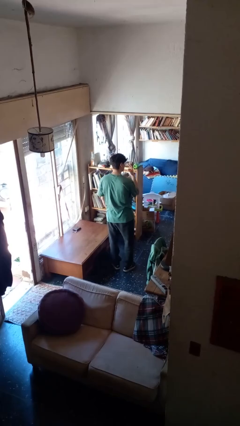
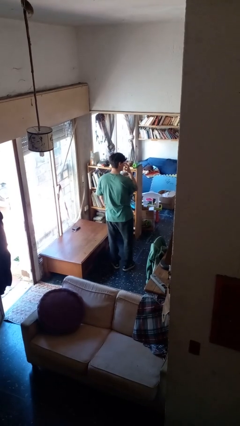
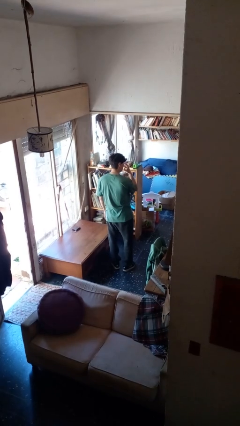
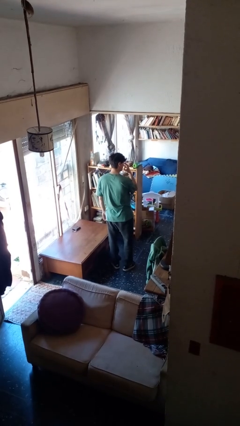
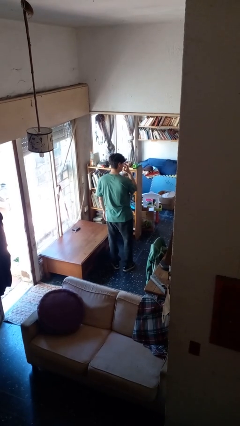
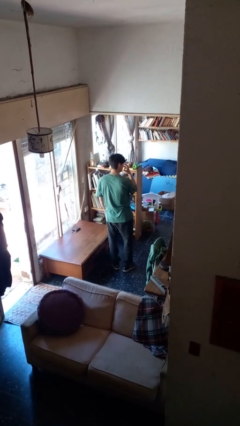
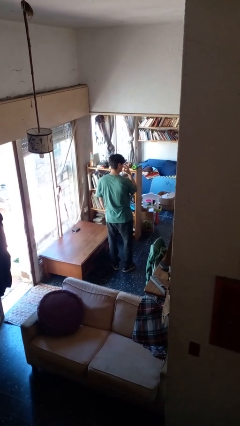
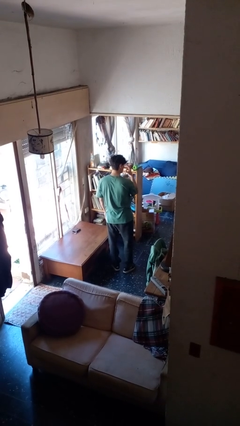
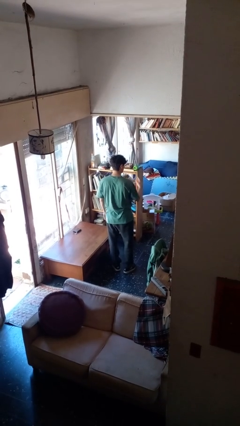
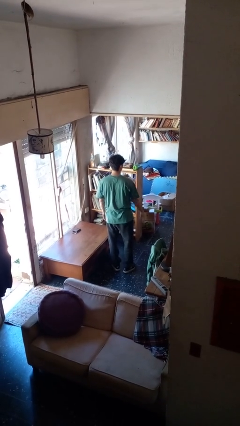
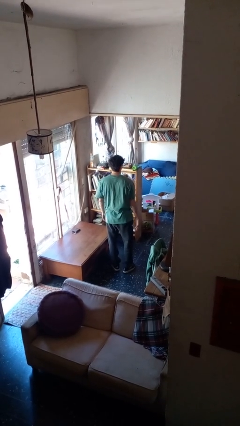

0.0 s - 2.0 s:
person gestures watch closely

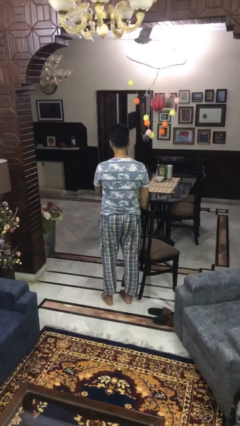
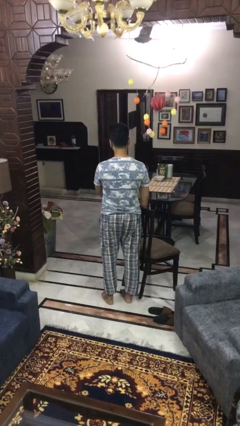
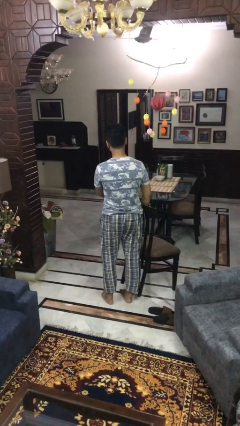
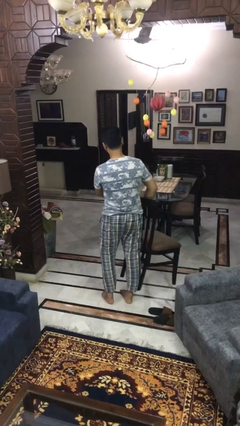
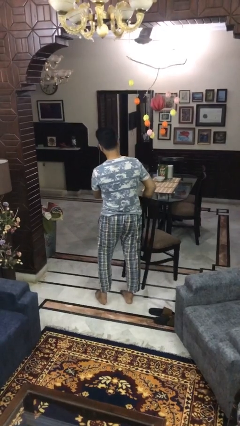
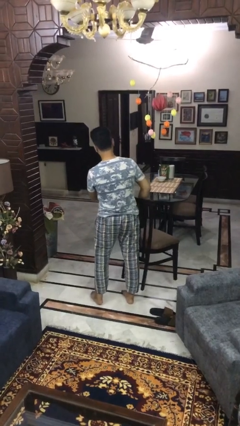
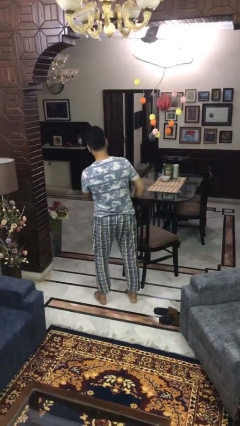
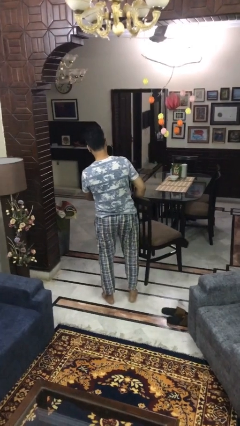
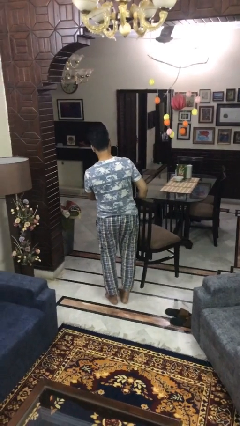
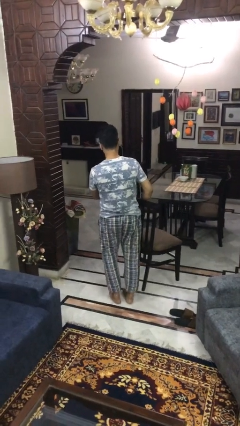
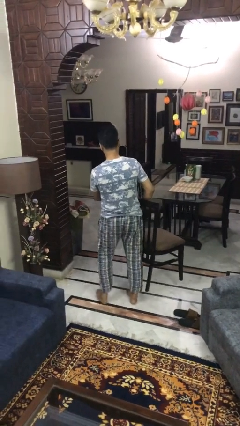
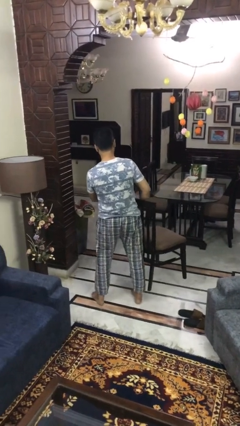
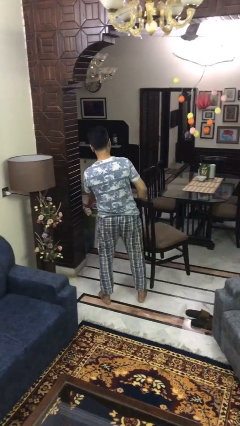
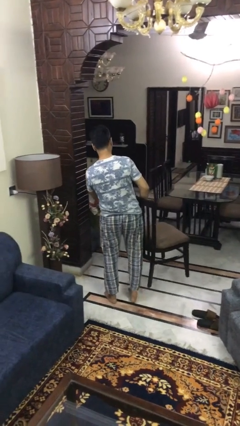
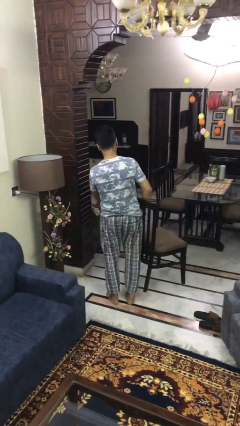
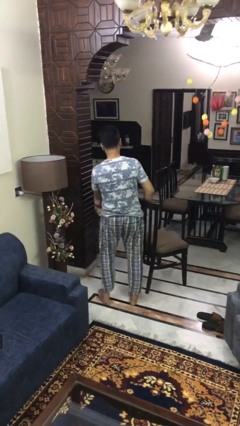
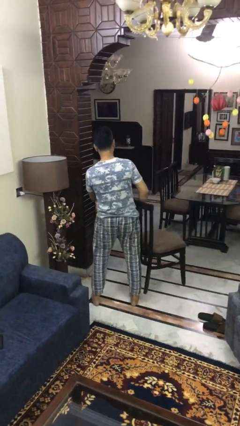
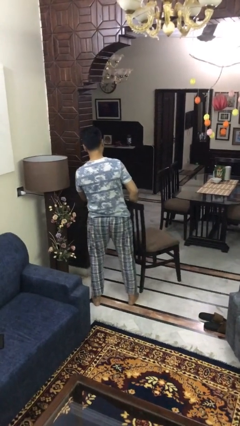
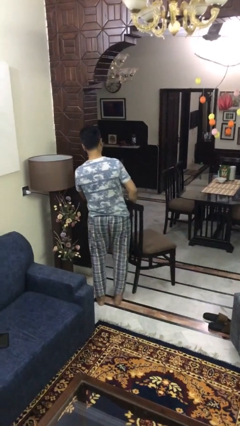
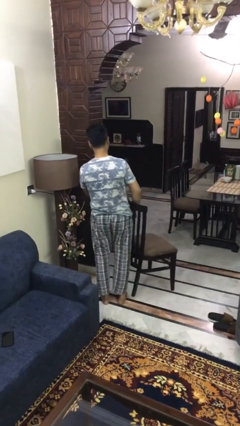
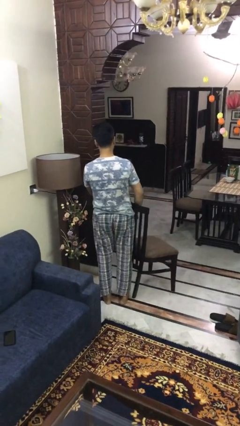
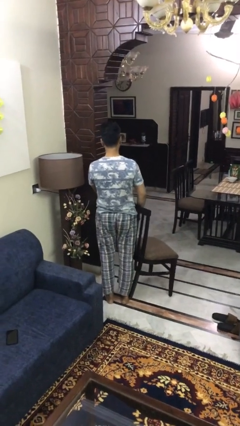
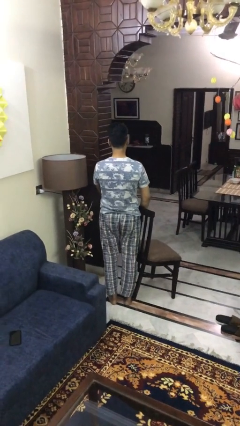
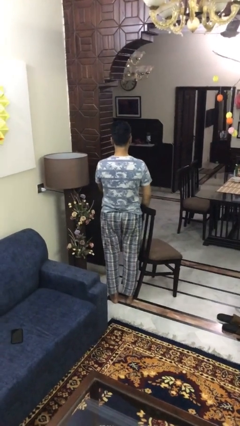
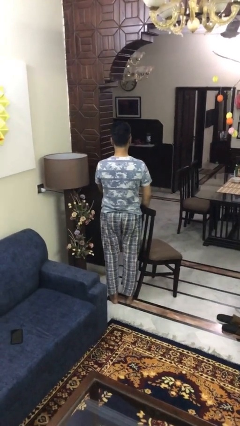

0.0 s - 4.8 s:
person carries furniture

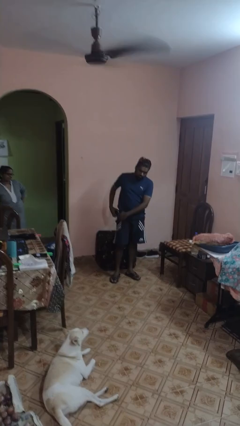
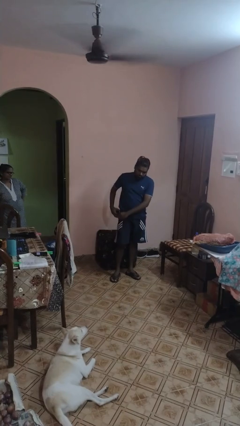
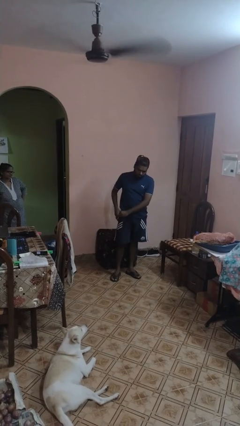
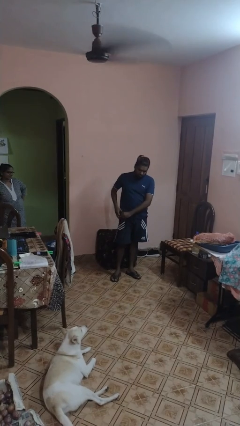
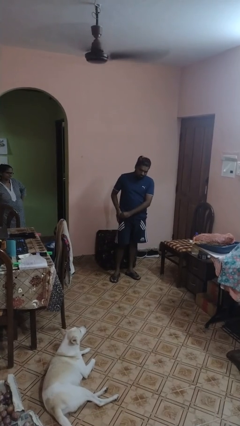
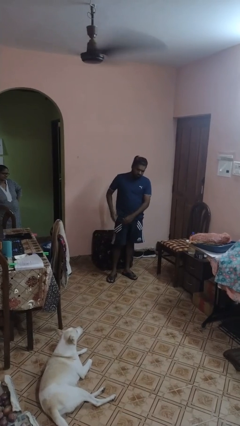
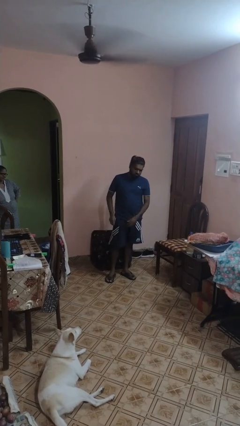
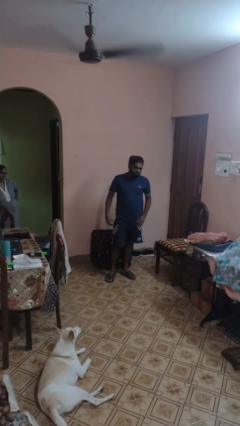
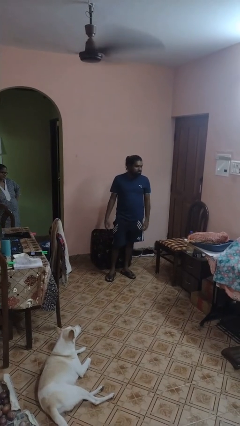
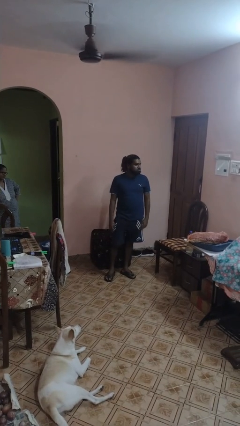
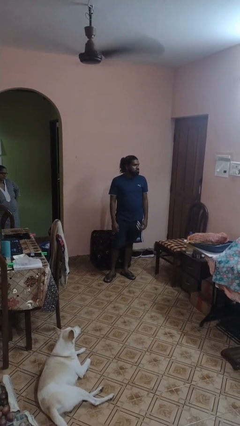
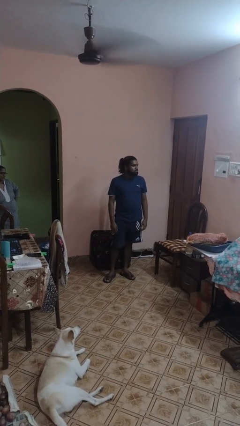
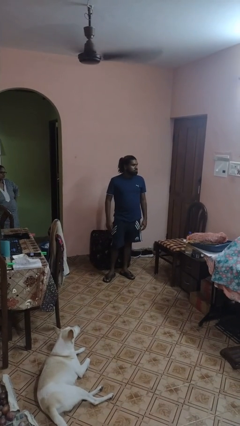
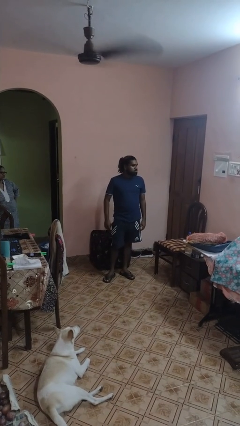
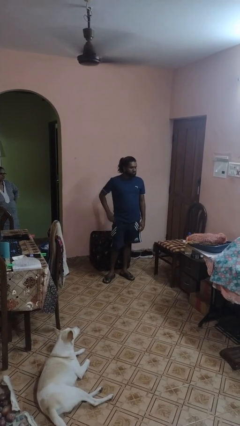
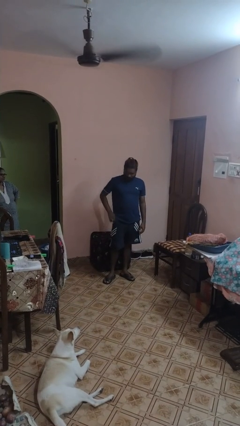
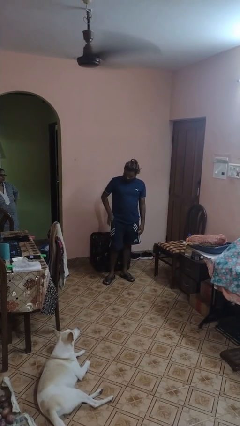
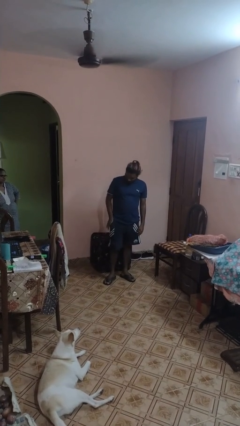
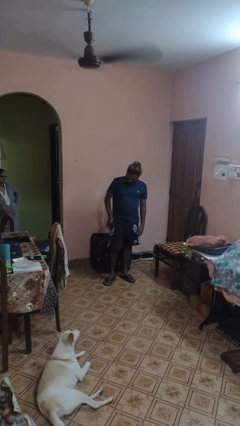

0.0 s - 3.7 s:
person puts phone into pocket

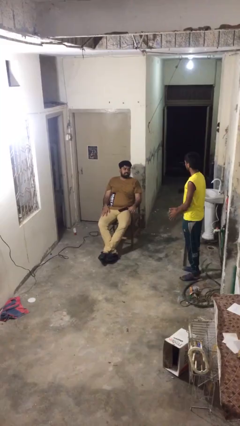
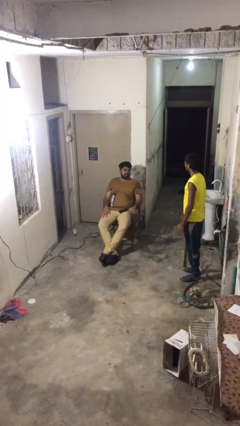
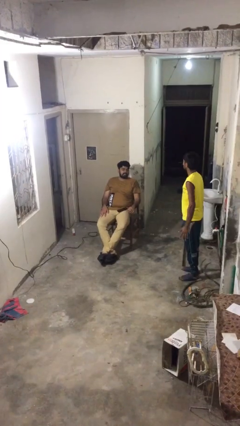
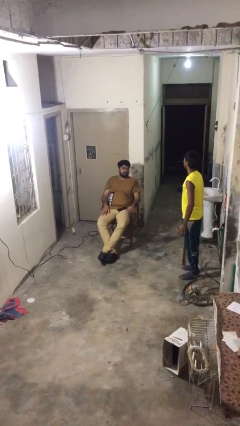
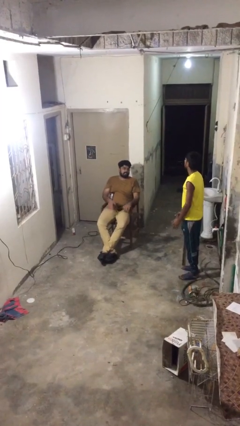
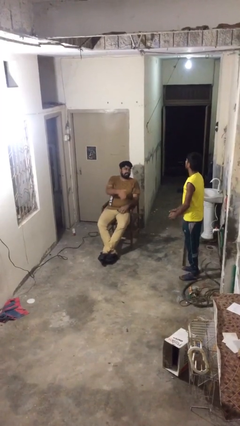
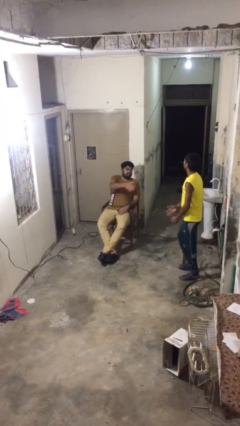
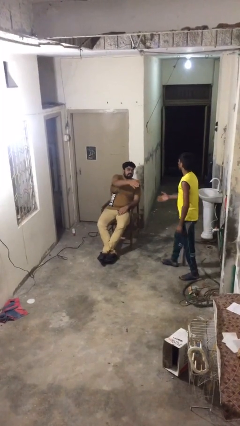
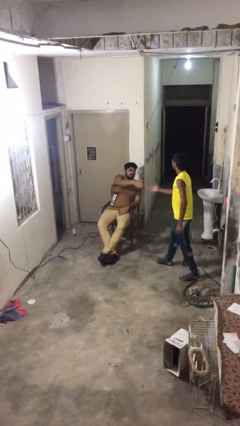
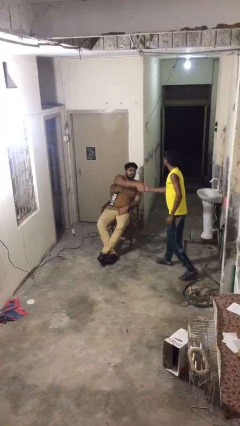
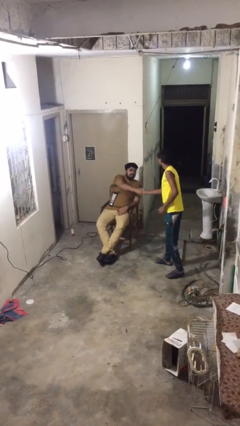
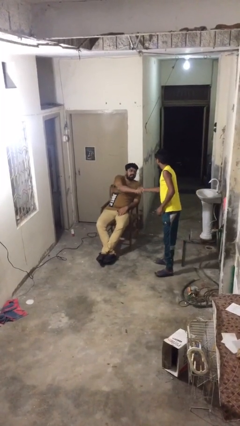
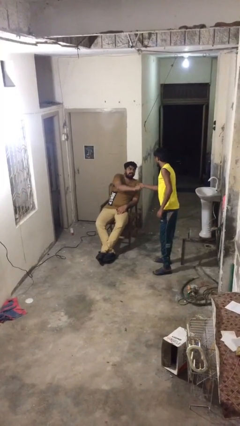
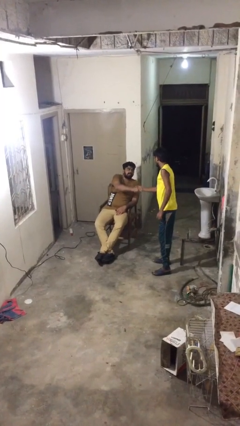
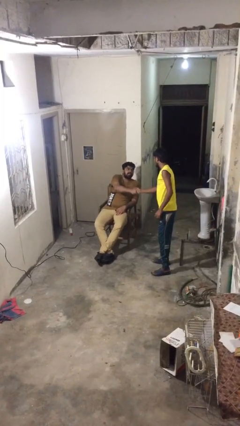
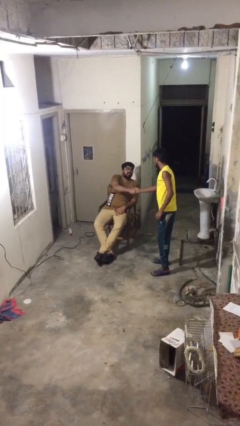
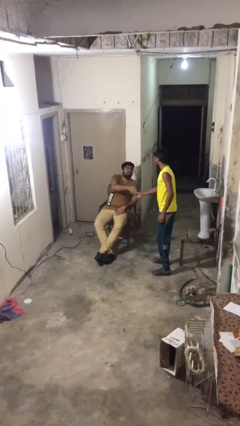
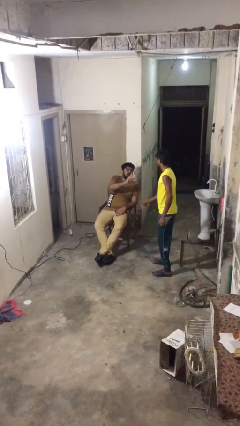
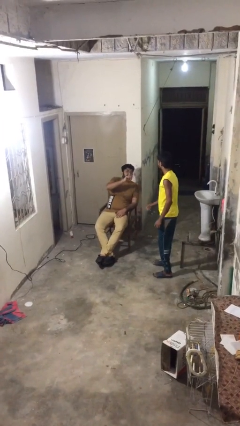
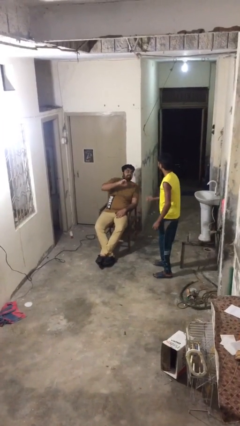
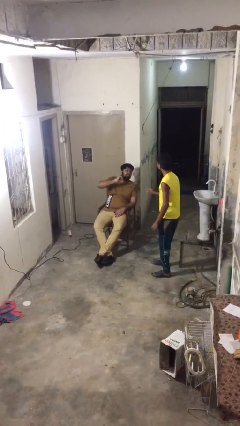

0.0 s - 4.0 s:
person shakes hand

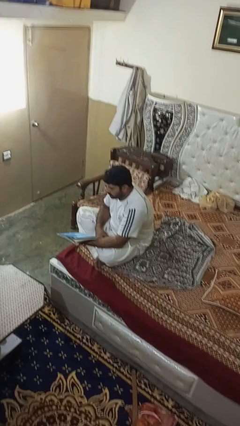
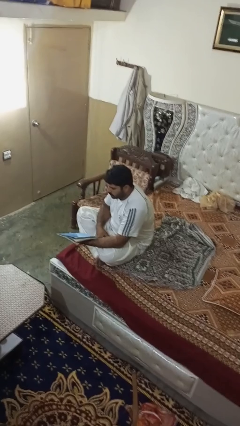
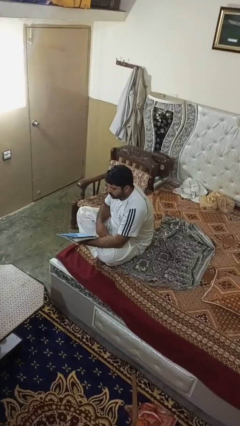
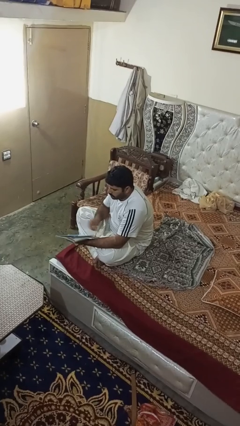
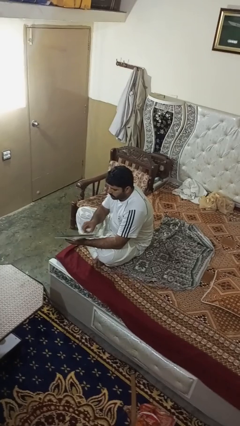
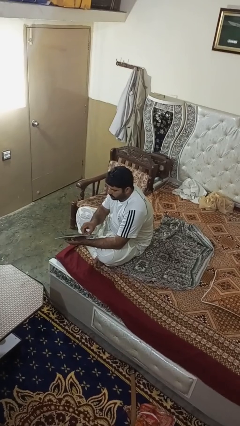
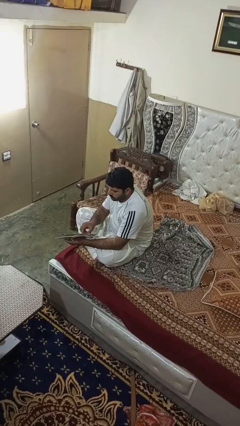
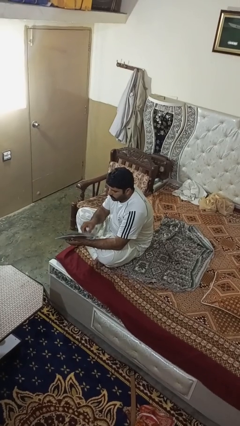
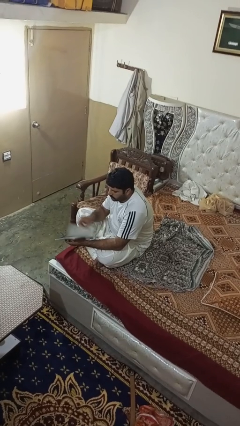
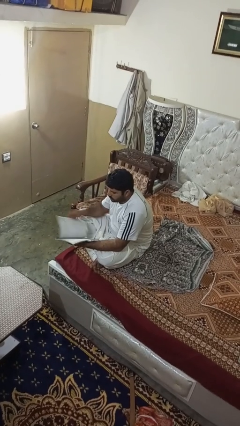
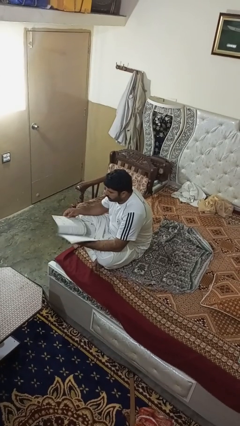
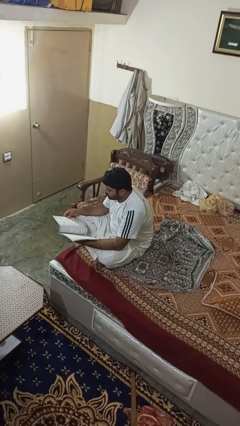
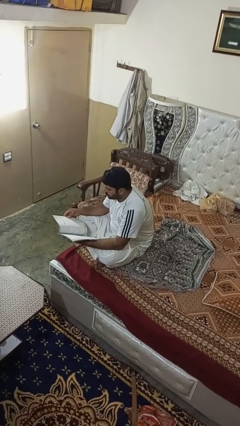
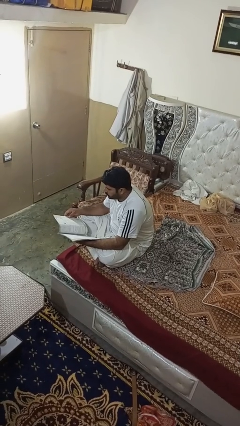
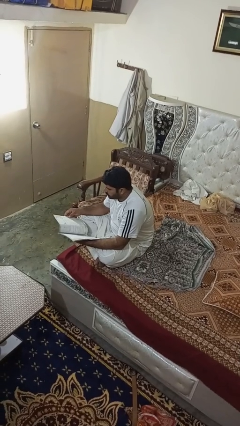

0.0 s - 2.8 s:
person reads magazine

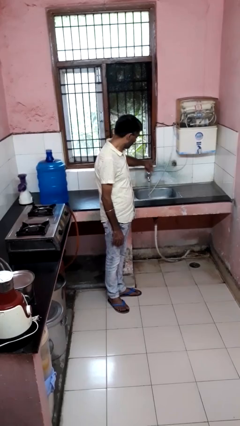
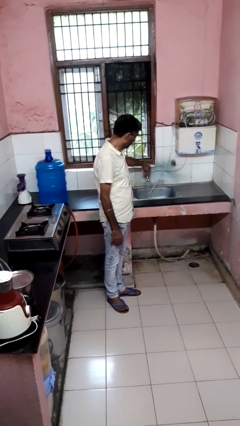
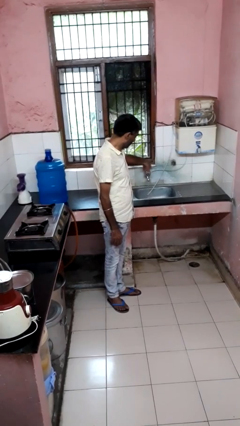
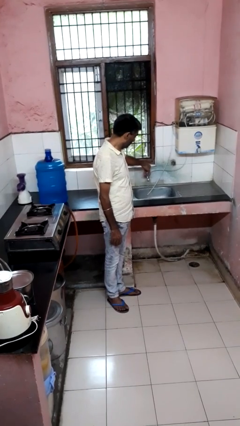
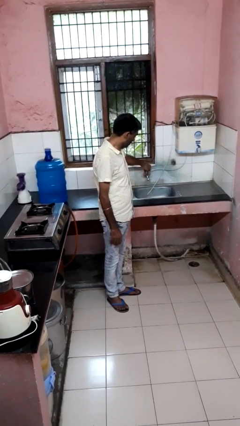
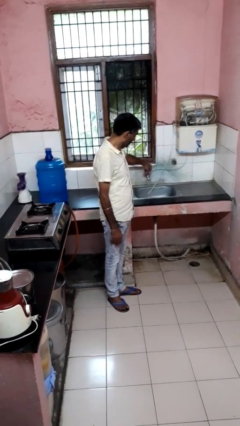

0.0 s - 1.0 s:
person turns off faucet
